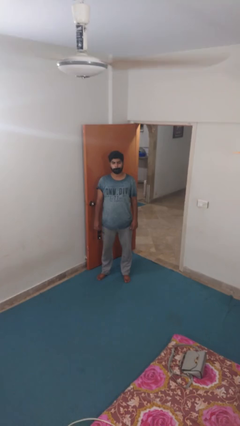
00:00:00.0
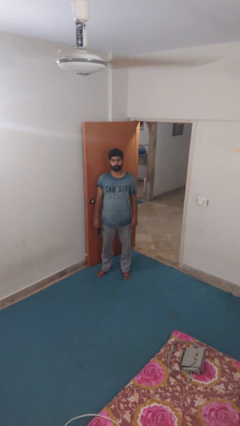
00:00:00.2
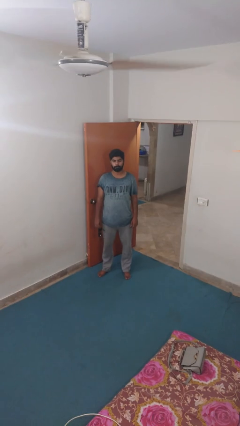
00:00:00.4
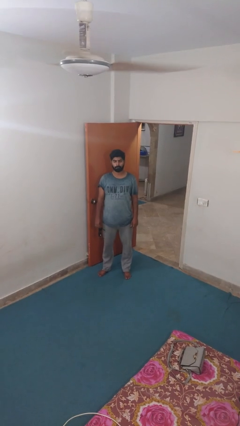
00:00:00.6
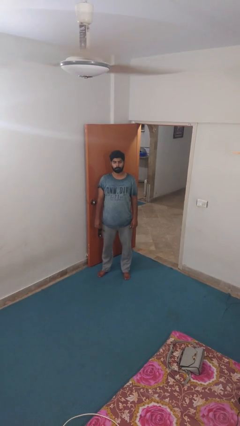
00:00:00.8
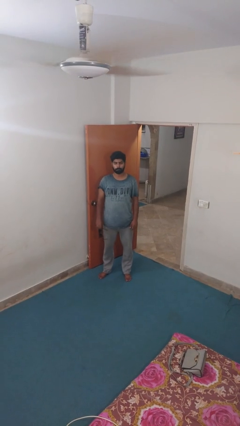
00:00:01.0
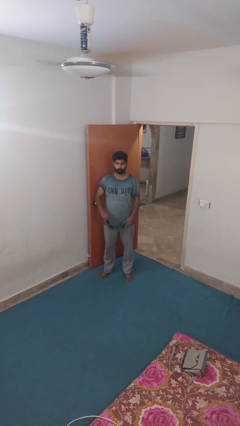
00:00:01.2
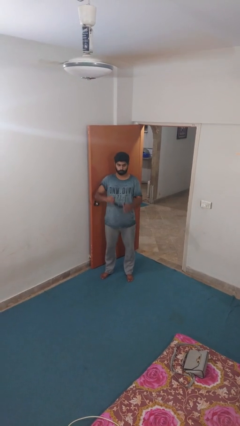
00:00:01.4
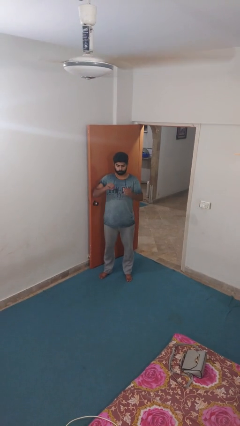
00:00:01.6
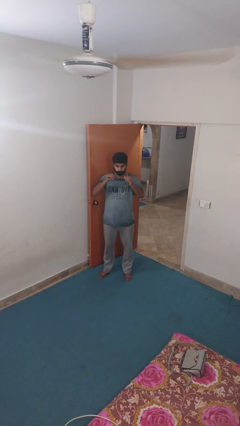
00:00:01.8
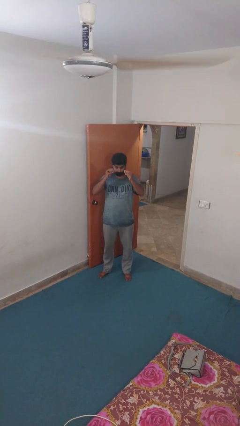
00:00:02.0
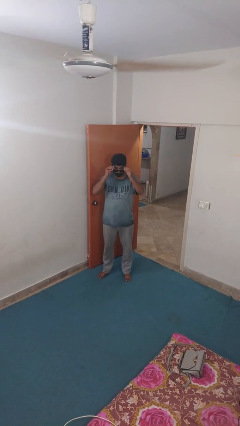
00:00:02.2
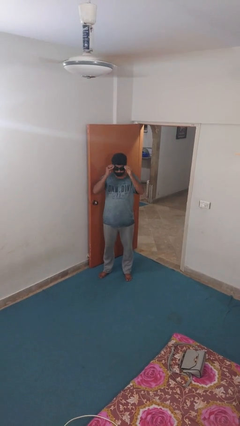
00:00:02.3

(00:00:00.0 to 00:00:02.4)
person puts on sunglasses

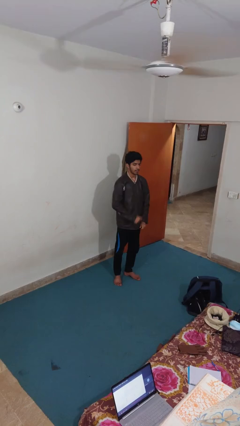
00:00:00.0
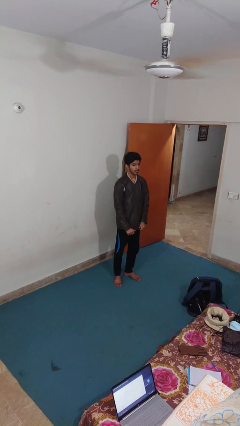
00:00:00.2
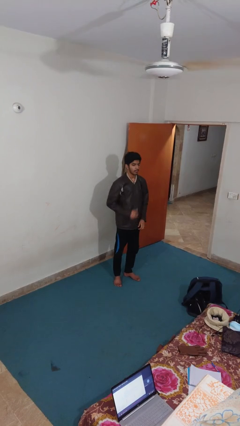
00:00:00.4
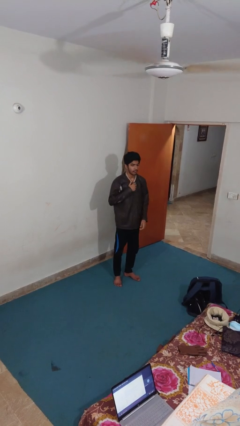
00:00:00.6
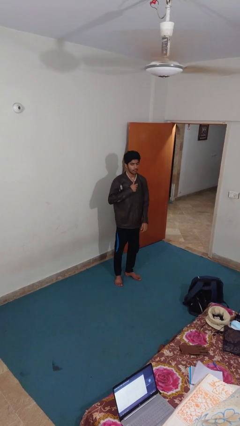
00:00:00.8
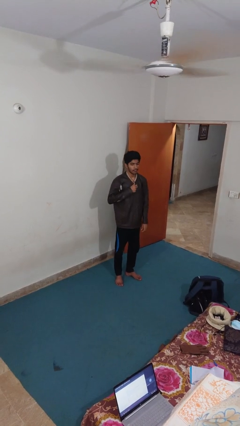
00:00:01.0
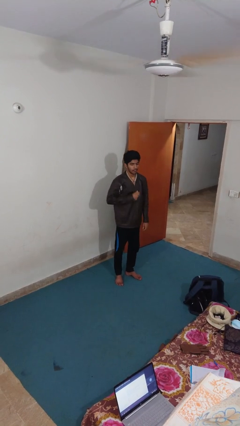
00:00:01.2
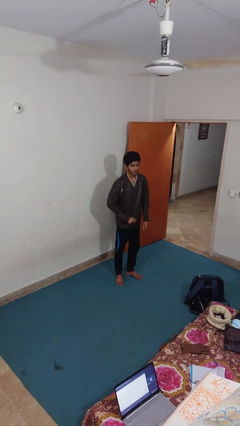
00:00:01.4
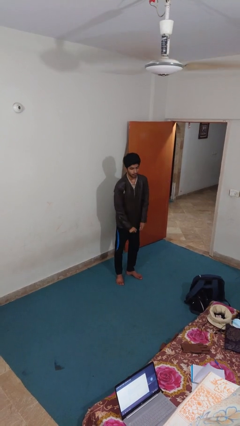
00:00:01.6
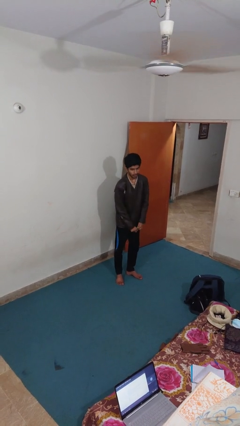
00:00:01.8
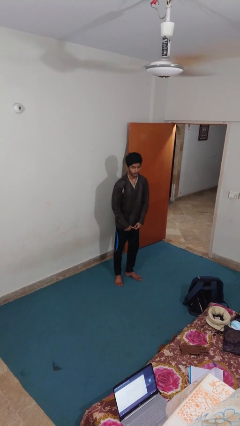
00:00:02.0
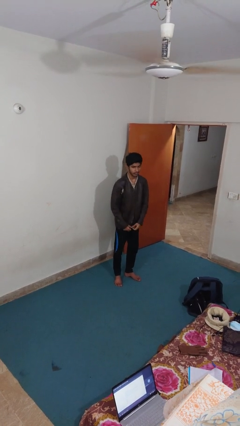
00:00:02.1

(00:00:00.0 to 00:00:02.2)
person unzips jacket

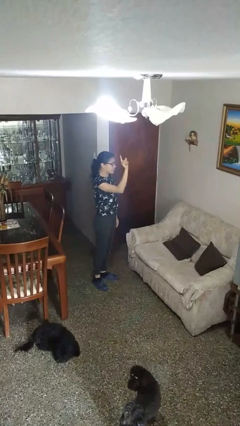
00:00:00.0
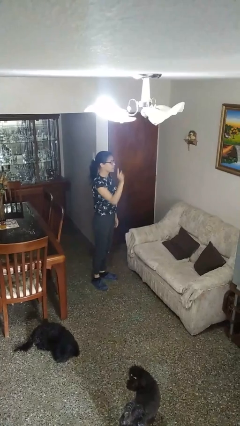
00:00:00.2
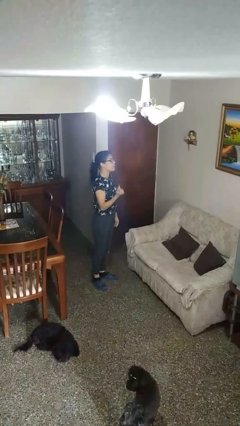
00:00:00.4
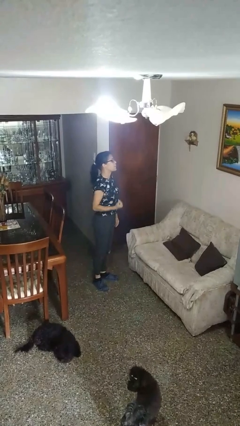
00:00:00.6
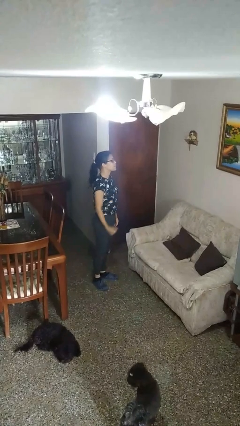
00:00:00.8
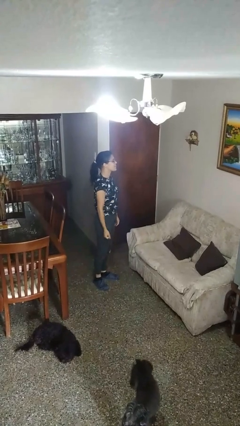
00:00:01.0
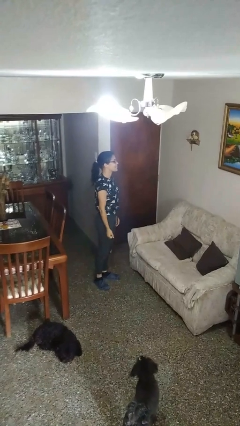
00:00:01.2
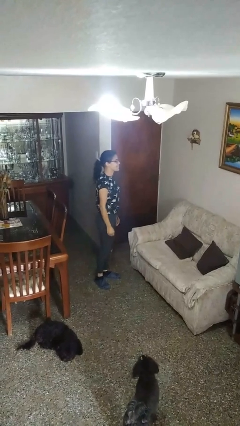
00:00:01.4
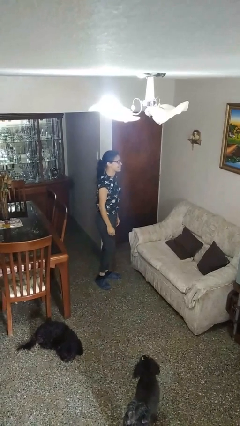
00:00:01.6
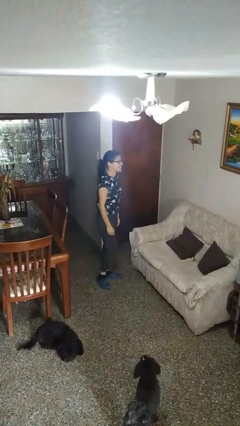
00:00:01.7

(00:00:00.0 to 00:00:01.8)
person gestures raise hand

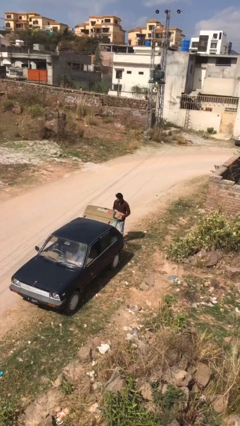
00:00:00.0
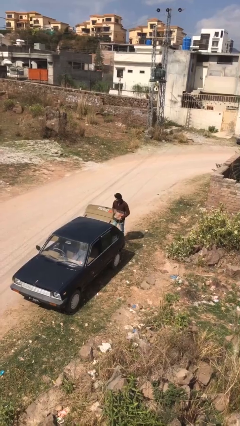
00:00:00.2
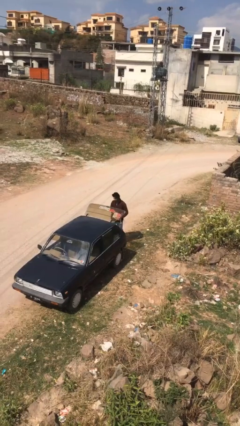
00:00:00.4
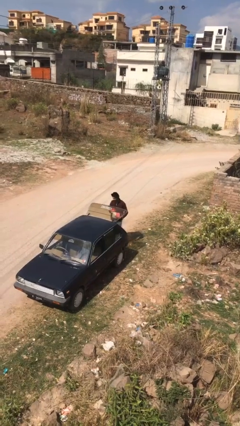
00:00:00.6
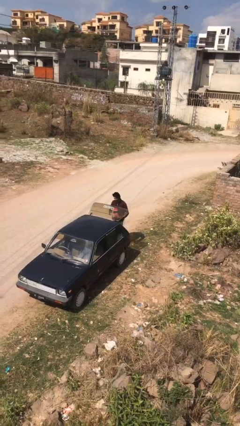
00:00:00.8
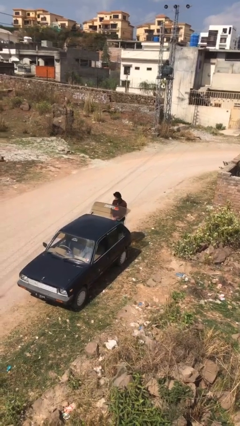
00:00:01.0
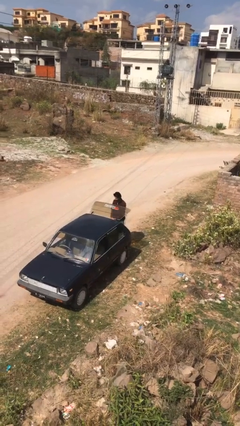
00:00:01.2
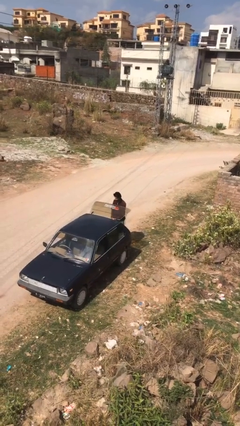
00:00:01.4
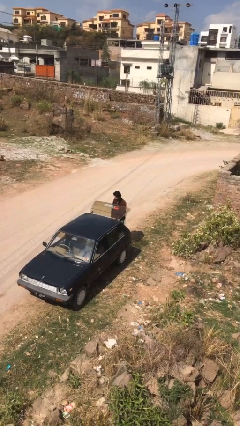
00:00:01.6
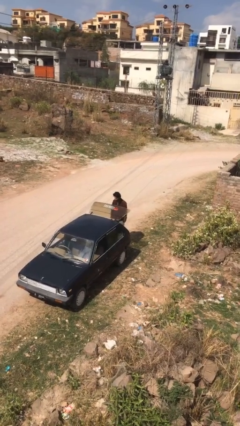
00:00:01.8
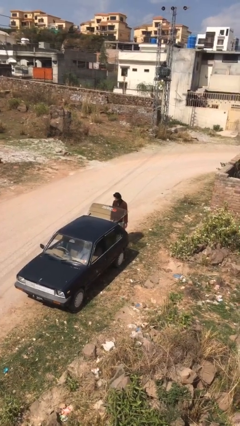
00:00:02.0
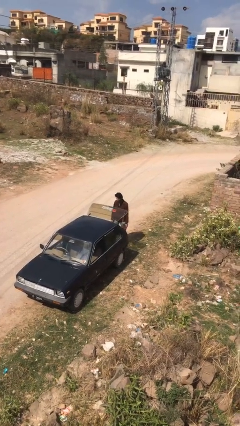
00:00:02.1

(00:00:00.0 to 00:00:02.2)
person loads car

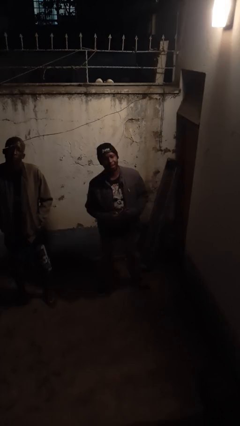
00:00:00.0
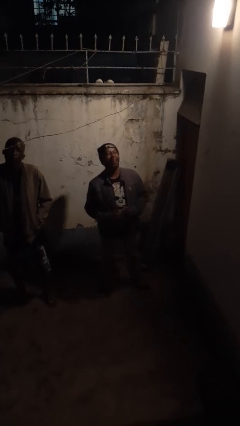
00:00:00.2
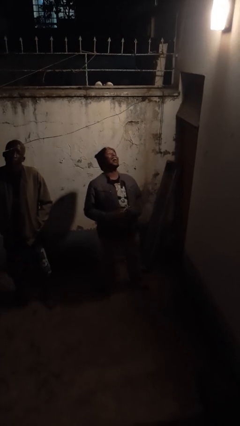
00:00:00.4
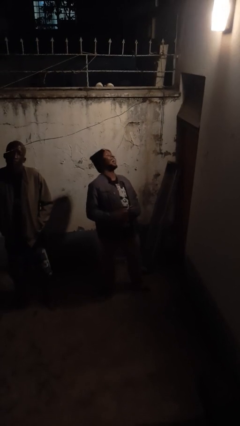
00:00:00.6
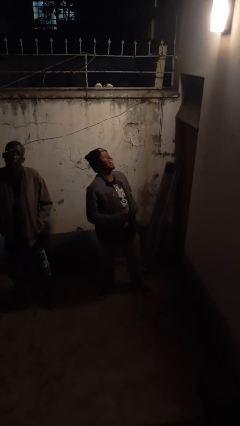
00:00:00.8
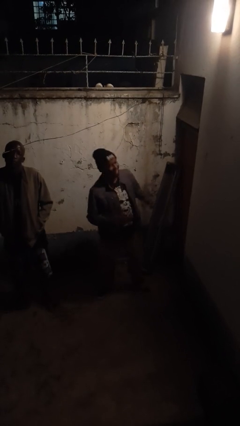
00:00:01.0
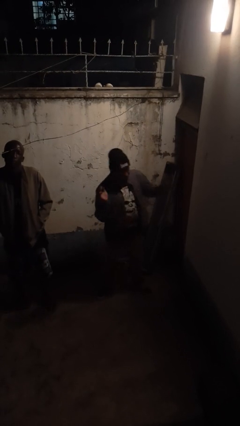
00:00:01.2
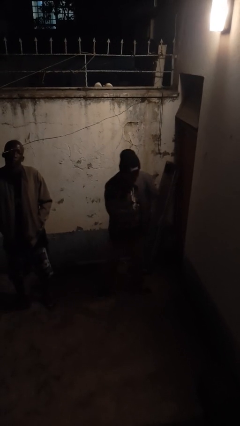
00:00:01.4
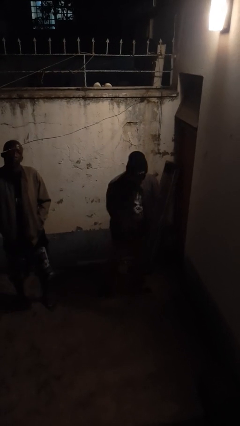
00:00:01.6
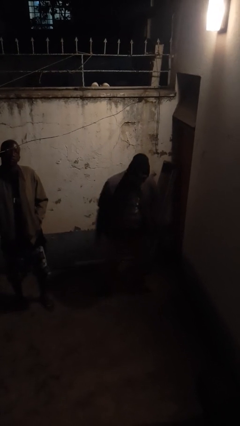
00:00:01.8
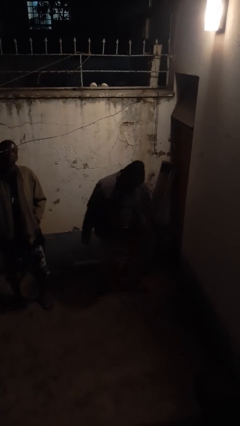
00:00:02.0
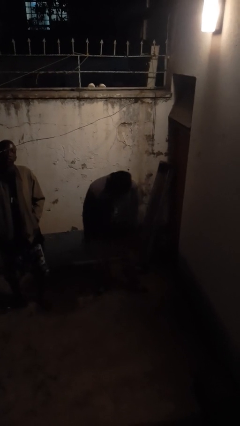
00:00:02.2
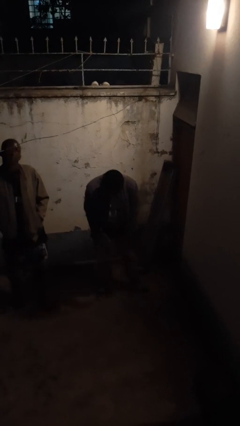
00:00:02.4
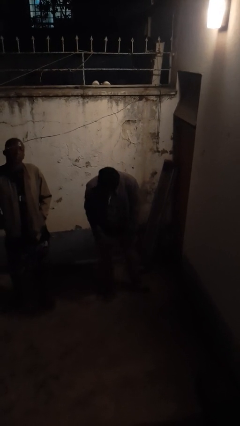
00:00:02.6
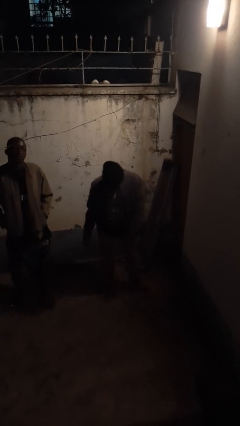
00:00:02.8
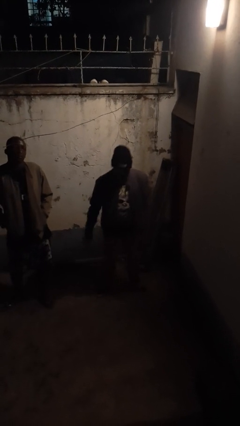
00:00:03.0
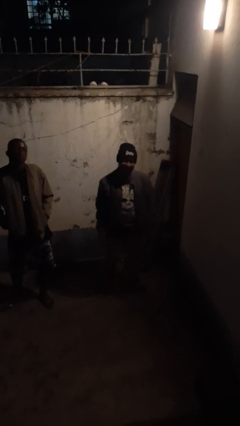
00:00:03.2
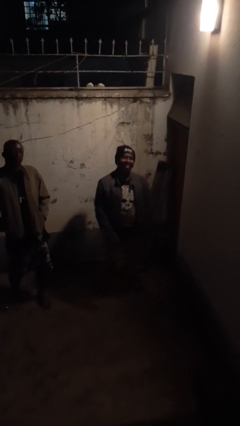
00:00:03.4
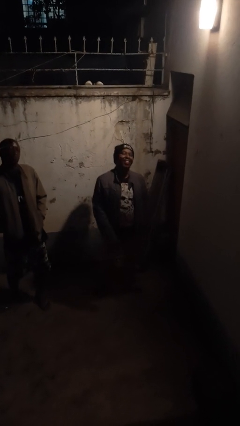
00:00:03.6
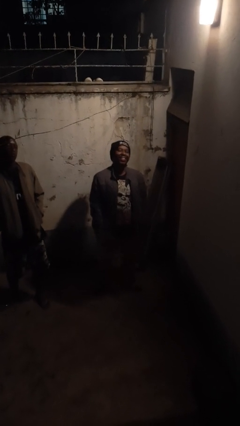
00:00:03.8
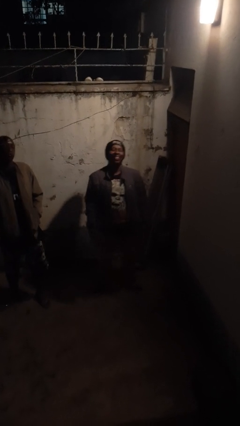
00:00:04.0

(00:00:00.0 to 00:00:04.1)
person laughs with person

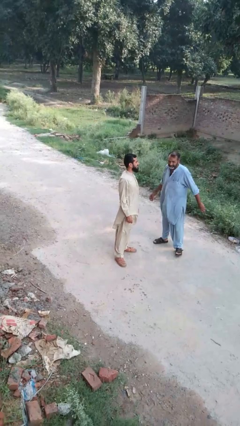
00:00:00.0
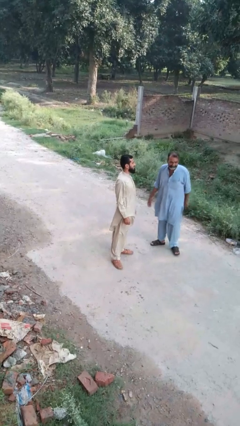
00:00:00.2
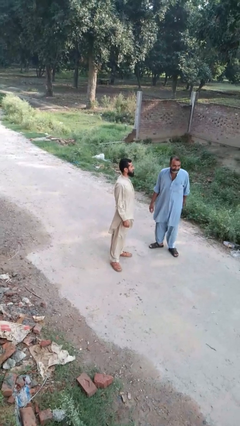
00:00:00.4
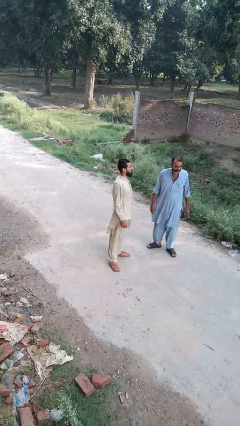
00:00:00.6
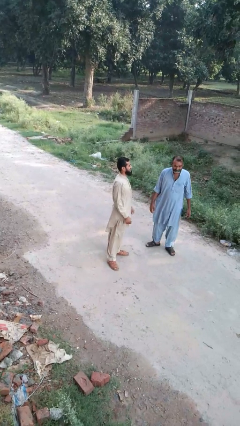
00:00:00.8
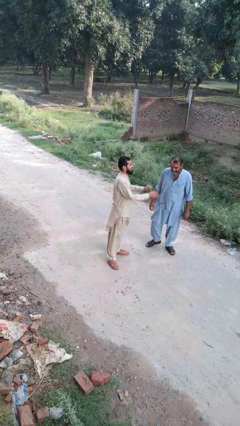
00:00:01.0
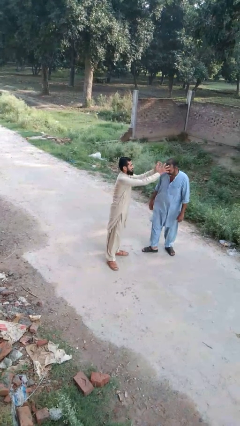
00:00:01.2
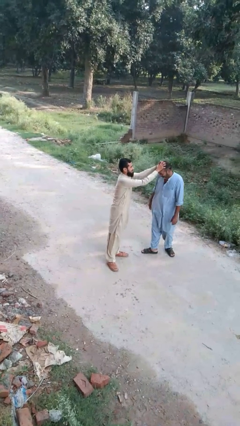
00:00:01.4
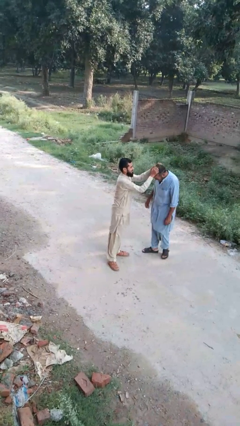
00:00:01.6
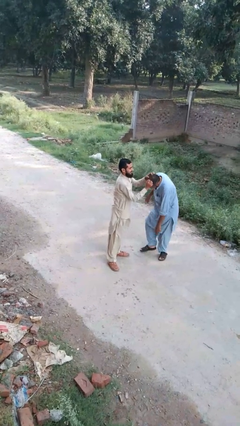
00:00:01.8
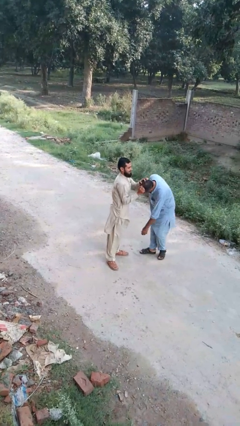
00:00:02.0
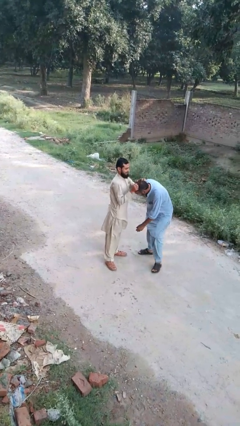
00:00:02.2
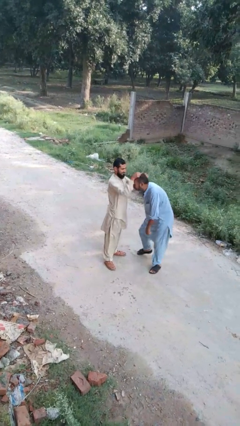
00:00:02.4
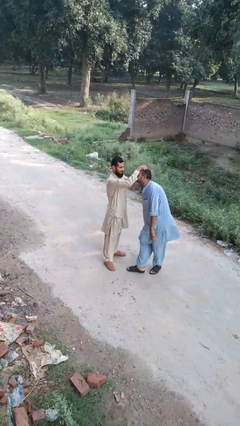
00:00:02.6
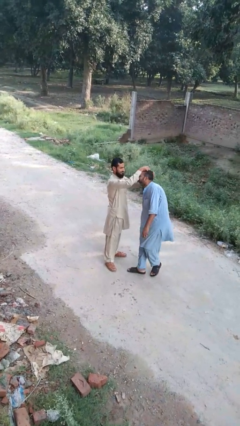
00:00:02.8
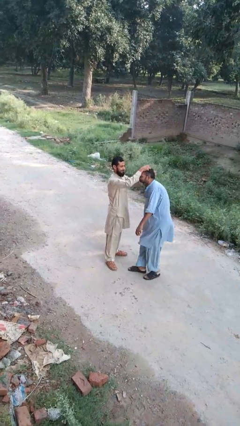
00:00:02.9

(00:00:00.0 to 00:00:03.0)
person grabs person by hair

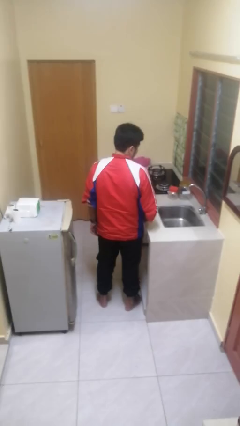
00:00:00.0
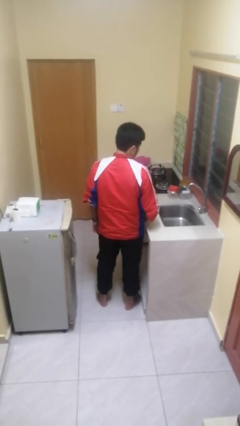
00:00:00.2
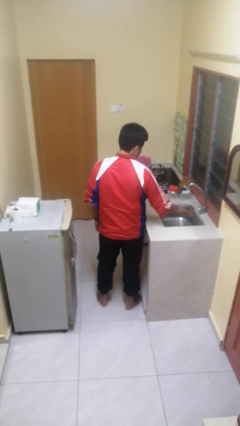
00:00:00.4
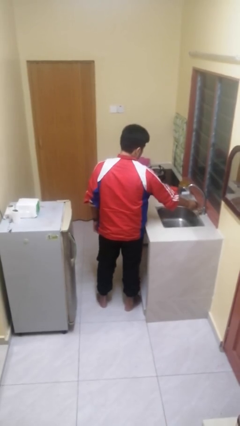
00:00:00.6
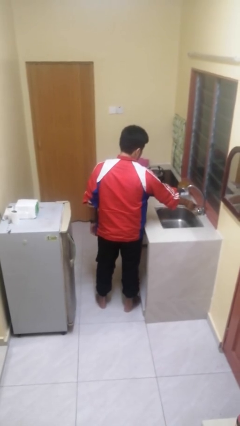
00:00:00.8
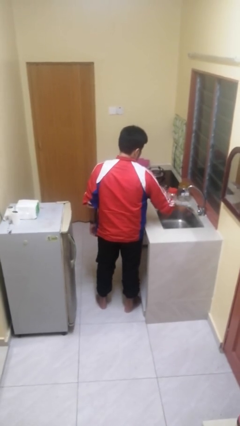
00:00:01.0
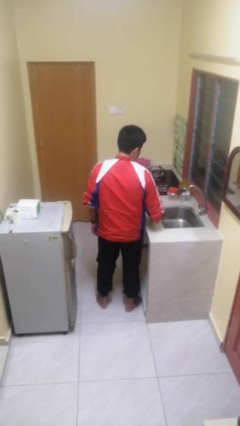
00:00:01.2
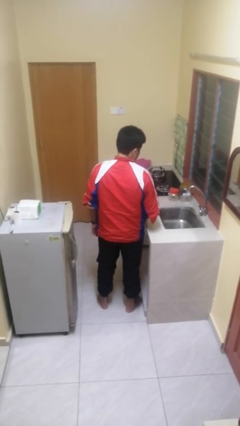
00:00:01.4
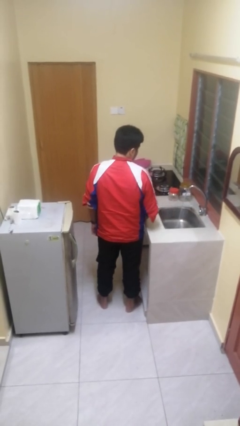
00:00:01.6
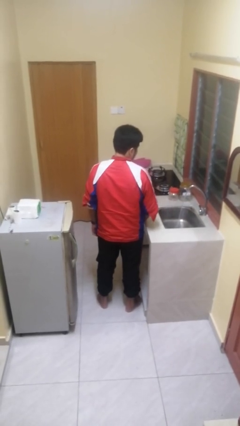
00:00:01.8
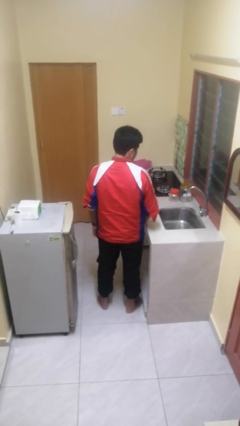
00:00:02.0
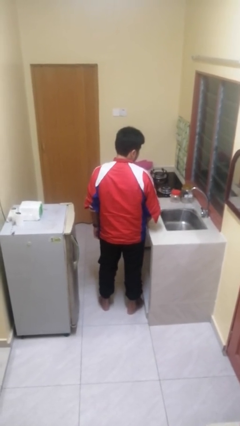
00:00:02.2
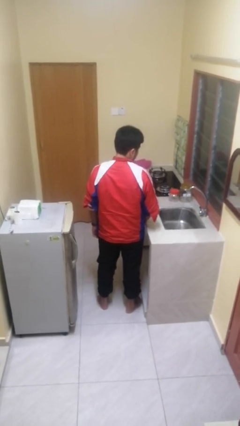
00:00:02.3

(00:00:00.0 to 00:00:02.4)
person turns on faucet
